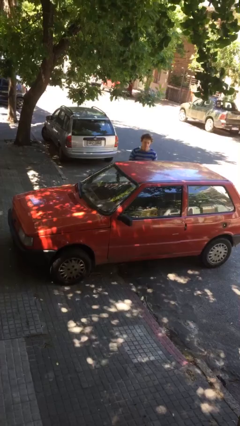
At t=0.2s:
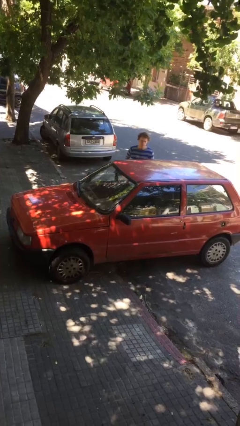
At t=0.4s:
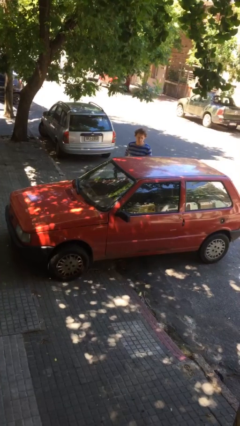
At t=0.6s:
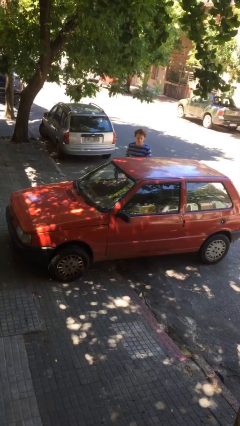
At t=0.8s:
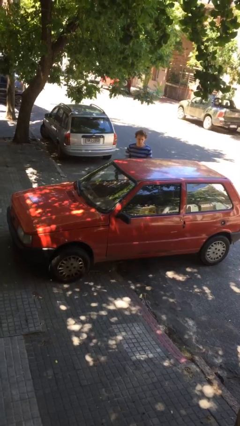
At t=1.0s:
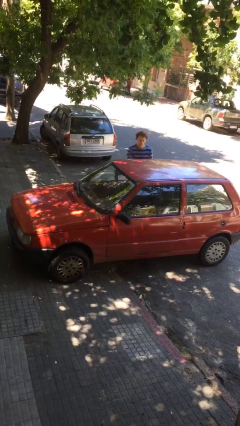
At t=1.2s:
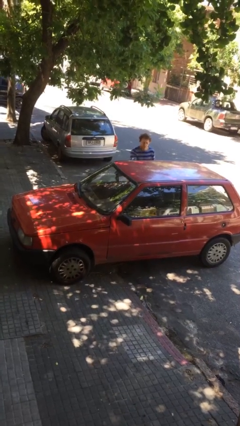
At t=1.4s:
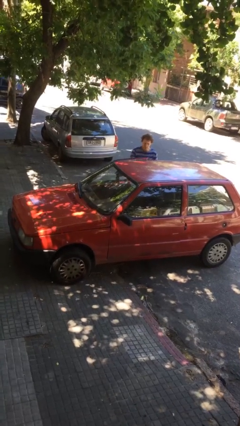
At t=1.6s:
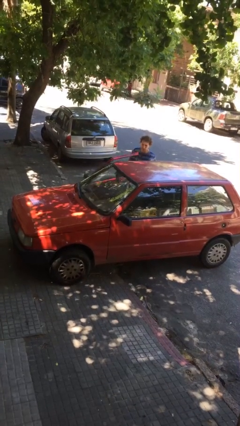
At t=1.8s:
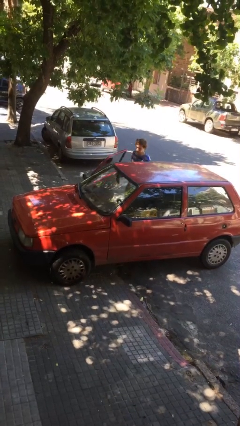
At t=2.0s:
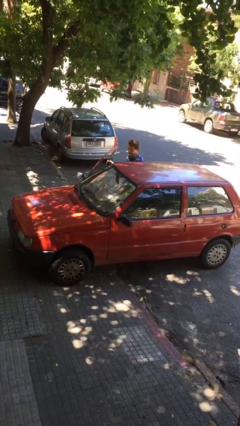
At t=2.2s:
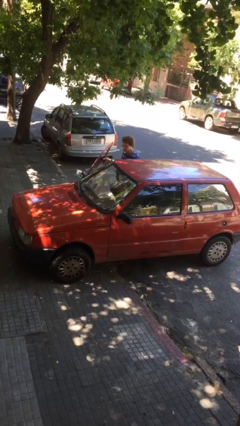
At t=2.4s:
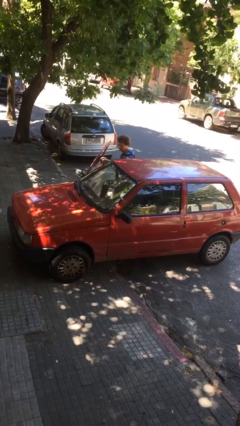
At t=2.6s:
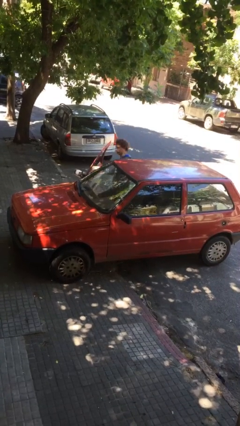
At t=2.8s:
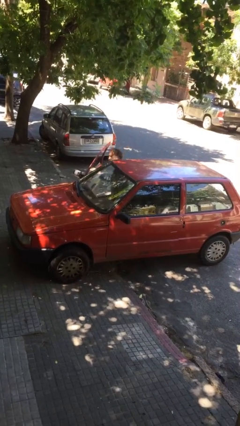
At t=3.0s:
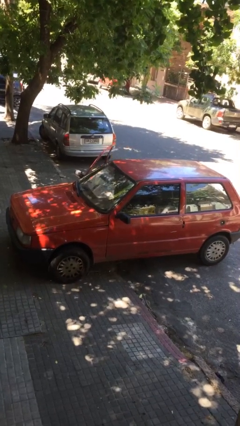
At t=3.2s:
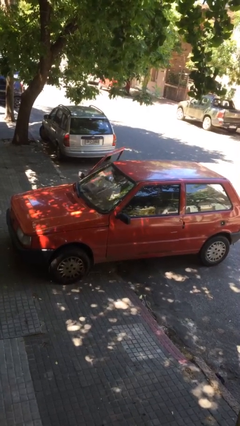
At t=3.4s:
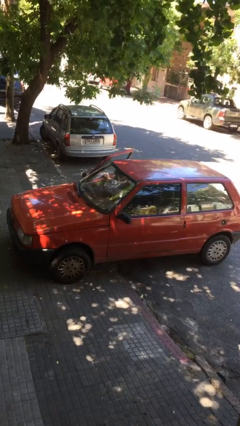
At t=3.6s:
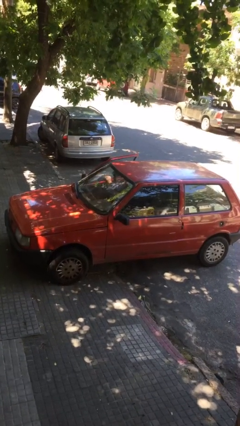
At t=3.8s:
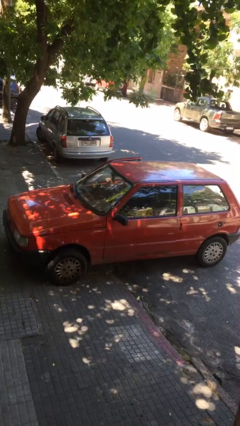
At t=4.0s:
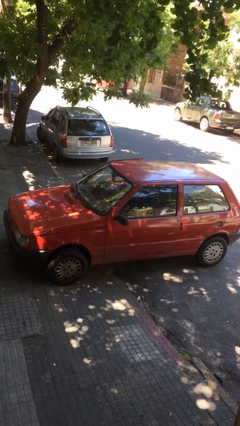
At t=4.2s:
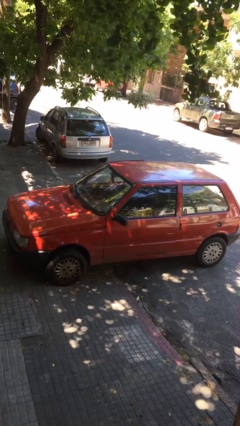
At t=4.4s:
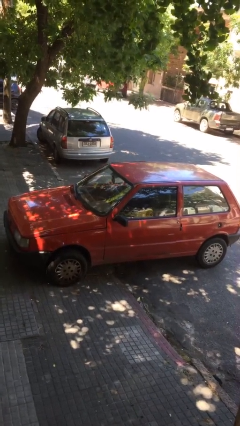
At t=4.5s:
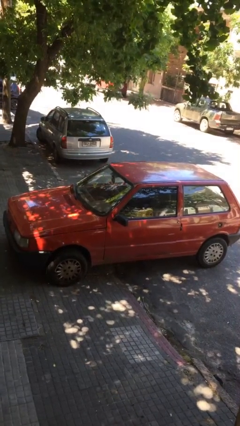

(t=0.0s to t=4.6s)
car picks up person

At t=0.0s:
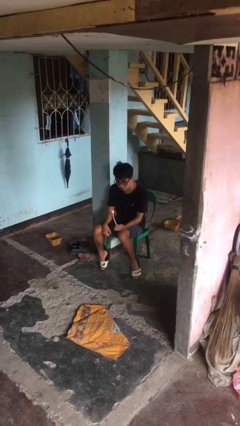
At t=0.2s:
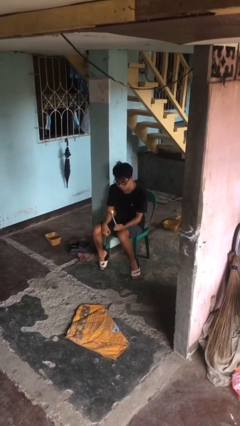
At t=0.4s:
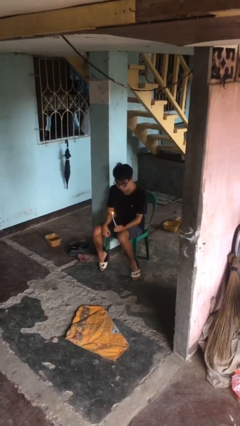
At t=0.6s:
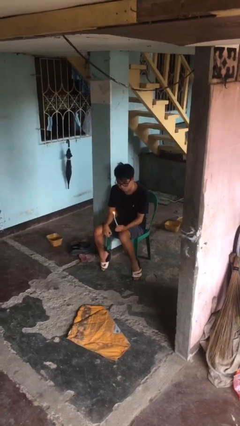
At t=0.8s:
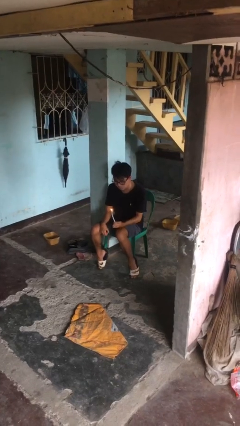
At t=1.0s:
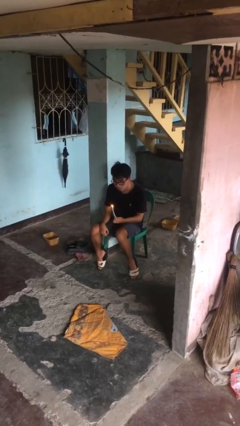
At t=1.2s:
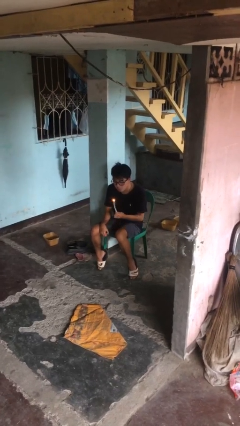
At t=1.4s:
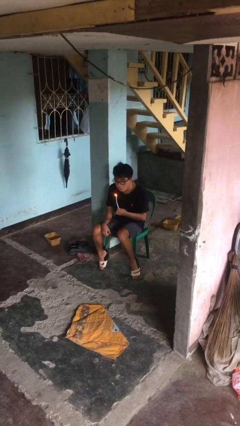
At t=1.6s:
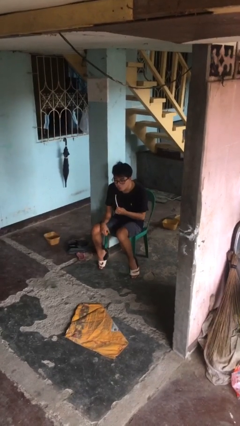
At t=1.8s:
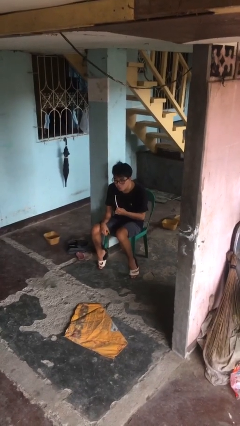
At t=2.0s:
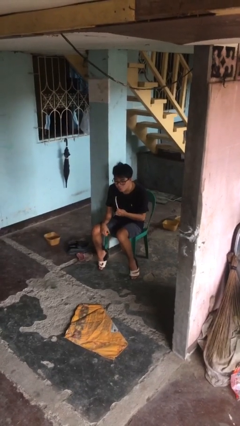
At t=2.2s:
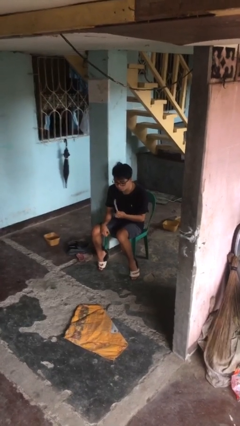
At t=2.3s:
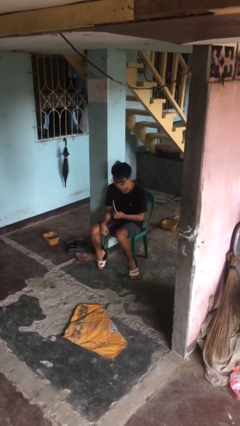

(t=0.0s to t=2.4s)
person extinguishes candle

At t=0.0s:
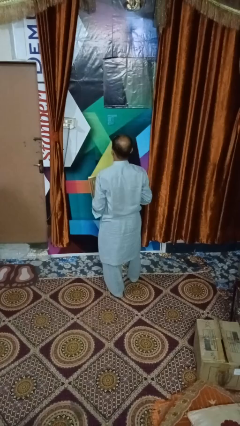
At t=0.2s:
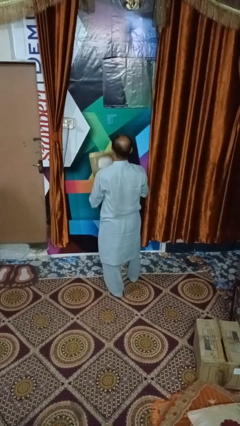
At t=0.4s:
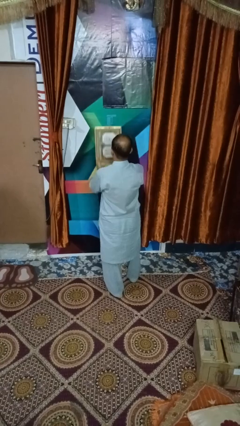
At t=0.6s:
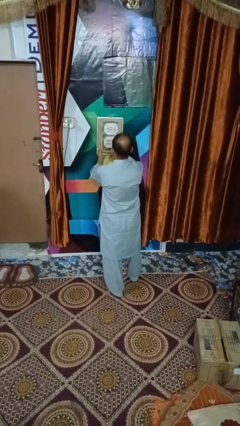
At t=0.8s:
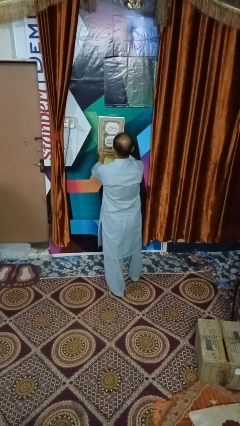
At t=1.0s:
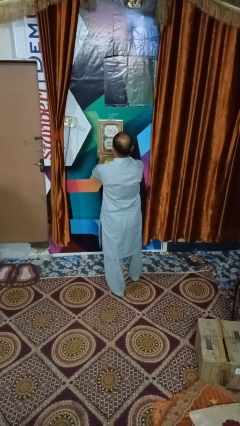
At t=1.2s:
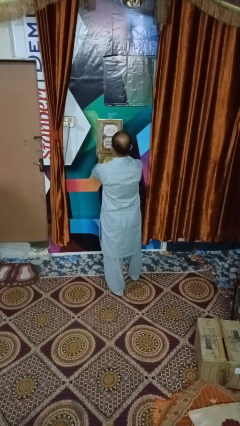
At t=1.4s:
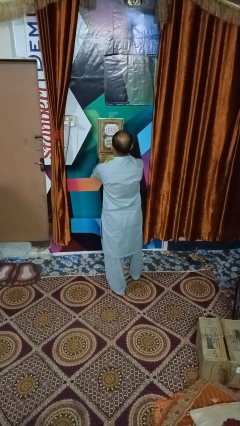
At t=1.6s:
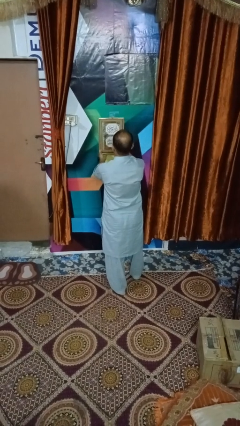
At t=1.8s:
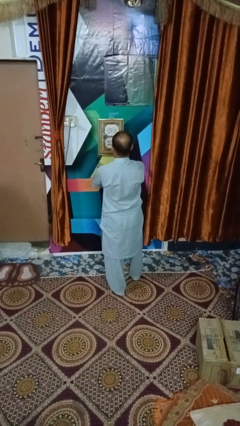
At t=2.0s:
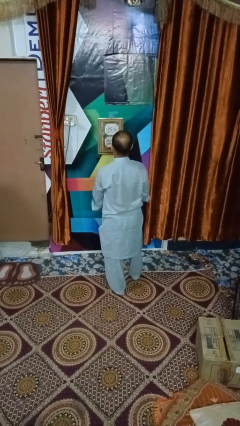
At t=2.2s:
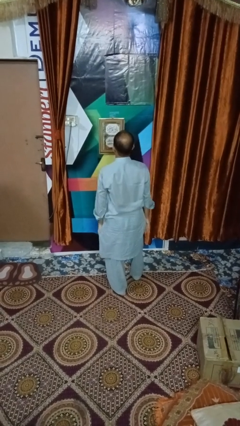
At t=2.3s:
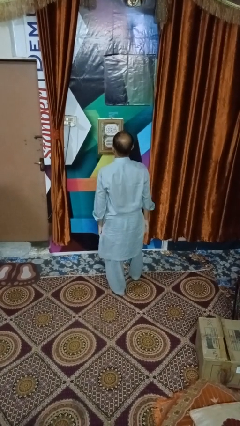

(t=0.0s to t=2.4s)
person puts up picture frame

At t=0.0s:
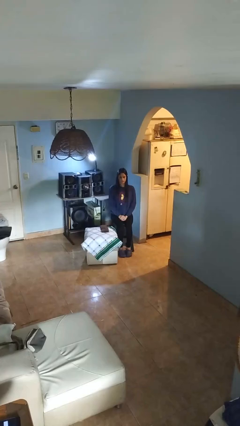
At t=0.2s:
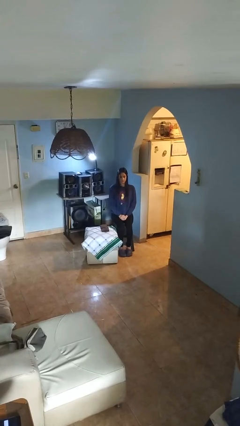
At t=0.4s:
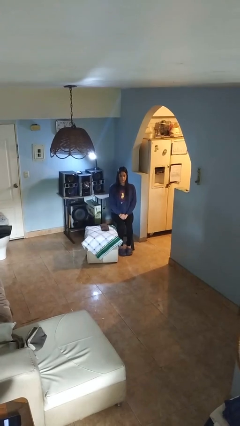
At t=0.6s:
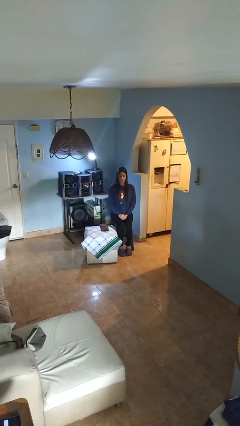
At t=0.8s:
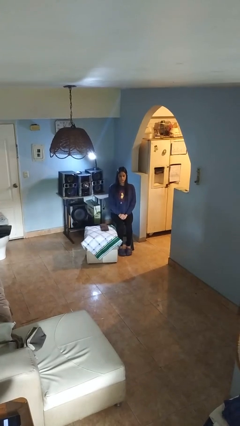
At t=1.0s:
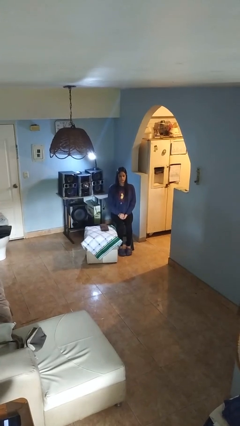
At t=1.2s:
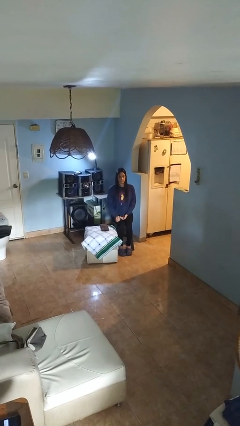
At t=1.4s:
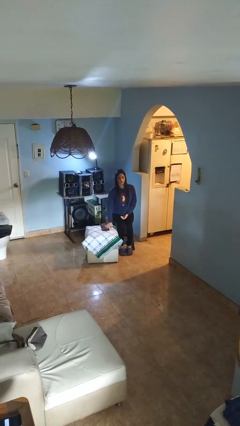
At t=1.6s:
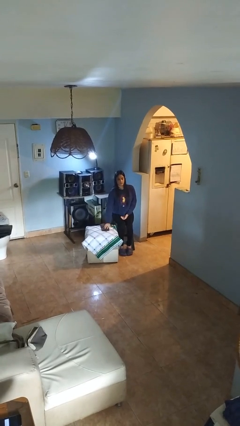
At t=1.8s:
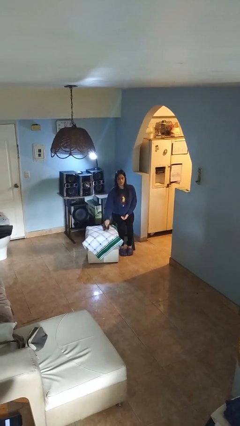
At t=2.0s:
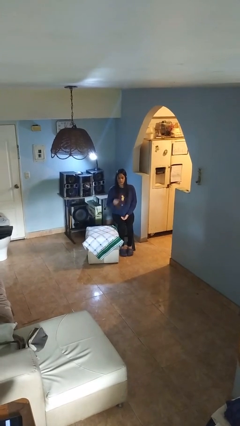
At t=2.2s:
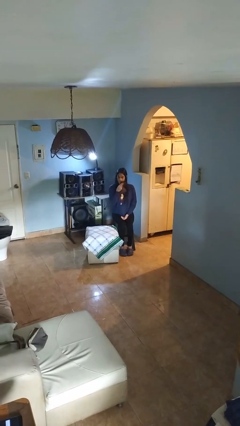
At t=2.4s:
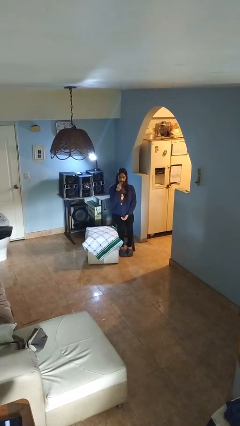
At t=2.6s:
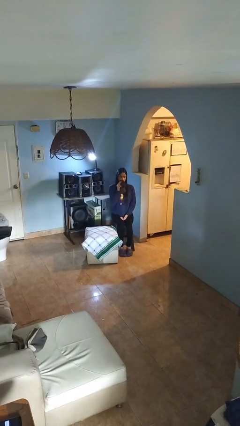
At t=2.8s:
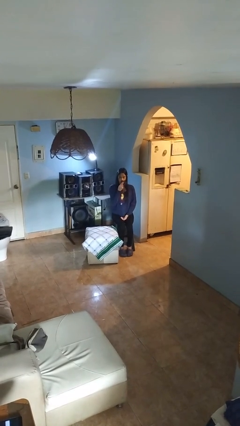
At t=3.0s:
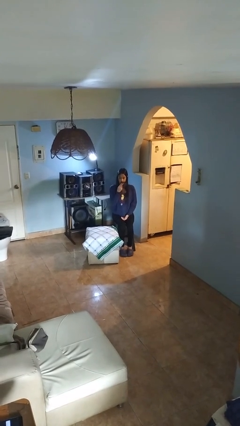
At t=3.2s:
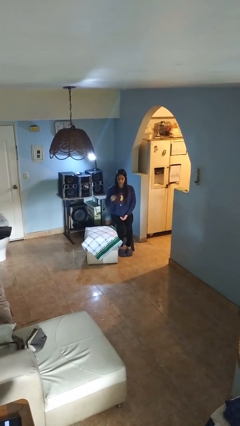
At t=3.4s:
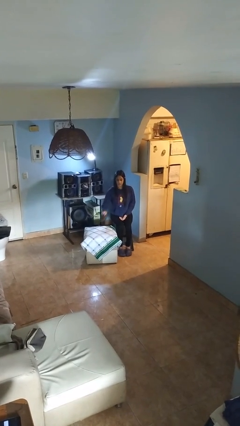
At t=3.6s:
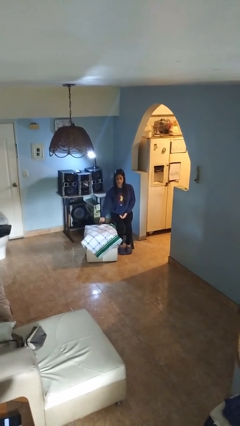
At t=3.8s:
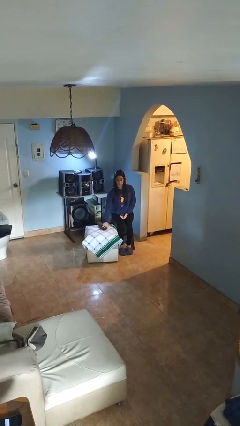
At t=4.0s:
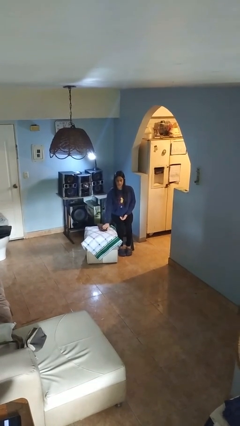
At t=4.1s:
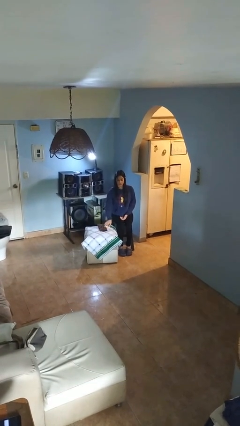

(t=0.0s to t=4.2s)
person wipes mouth with napkin

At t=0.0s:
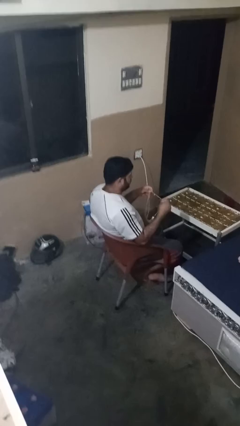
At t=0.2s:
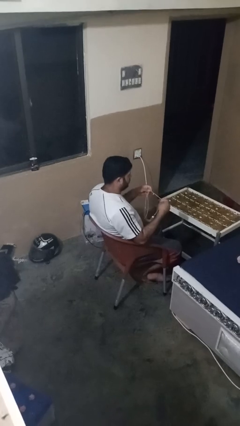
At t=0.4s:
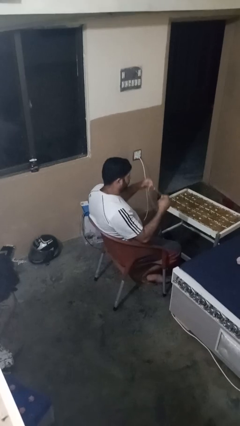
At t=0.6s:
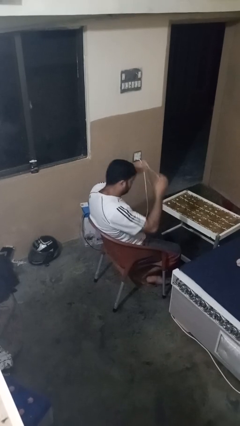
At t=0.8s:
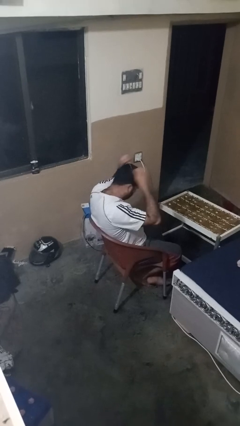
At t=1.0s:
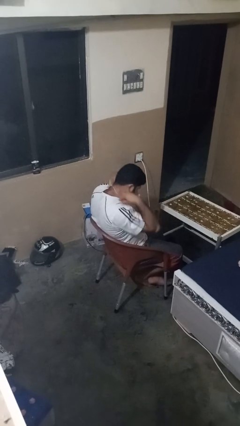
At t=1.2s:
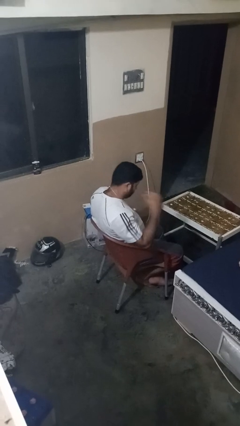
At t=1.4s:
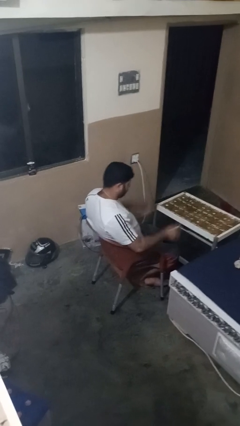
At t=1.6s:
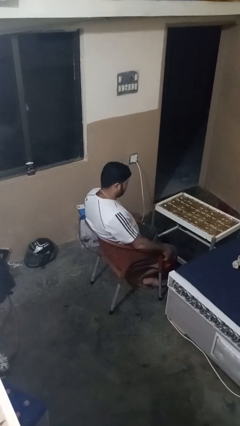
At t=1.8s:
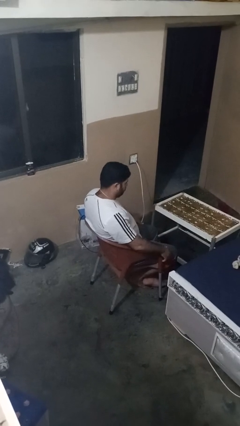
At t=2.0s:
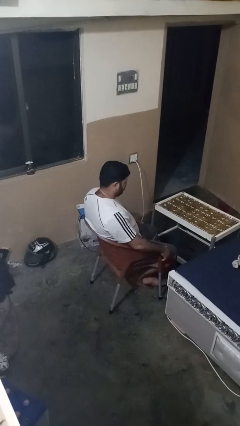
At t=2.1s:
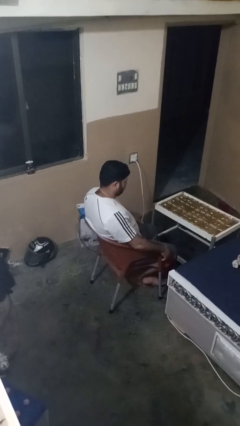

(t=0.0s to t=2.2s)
person puts on necklace

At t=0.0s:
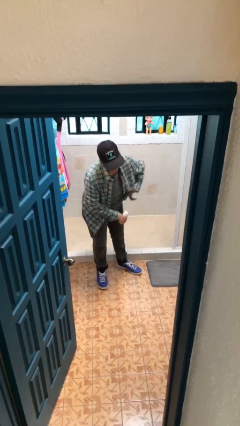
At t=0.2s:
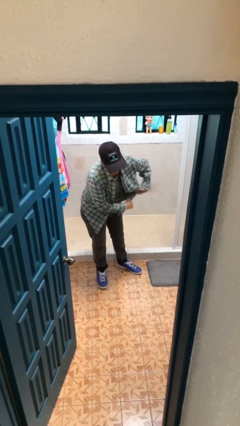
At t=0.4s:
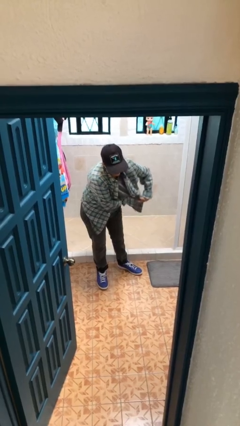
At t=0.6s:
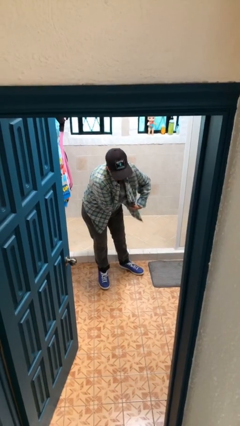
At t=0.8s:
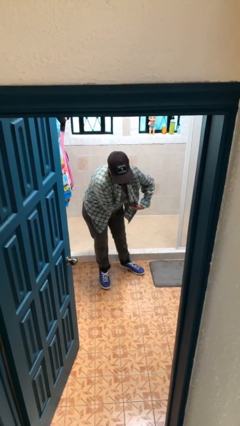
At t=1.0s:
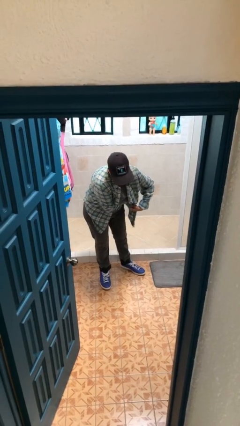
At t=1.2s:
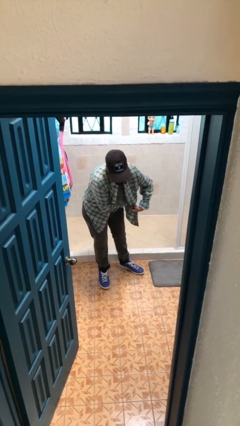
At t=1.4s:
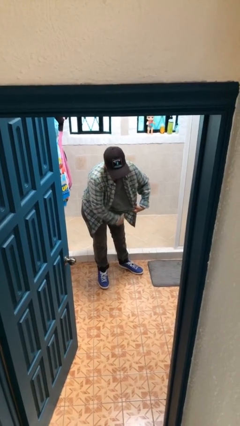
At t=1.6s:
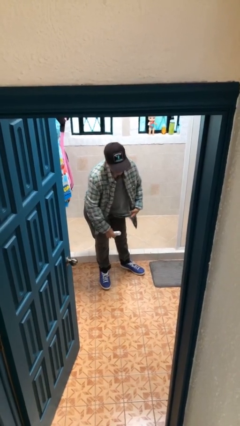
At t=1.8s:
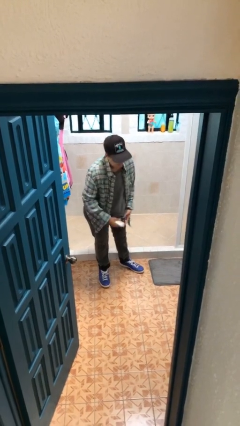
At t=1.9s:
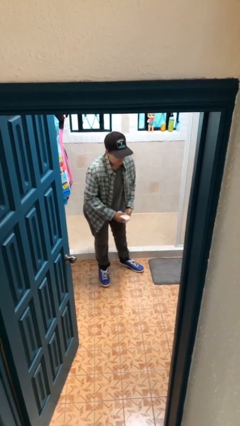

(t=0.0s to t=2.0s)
person applies deodorant
